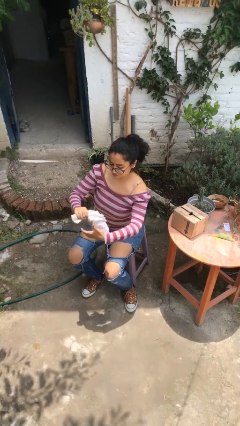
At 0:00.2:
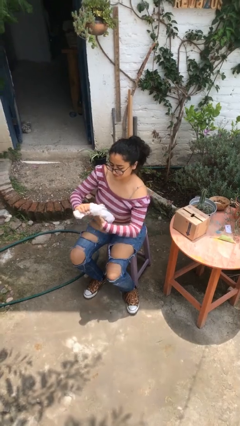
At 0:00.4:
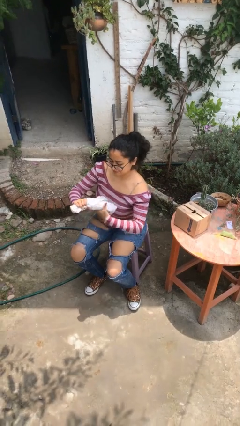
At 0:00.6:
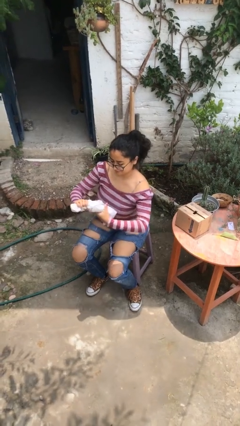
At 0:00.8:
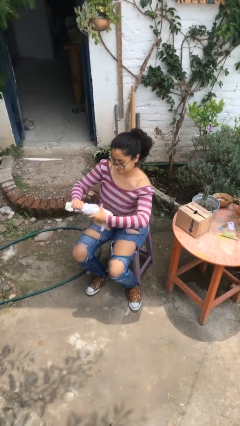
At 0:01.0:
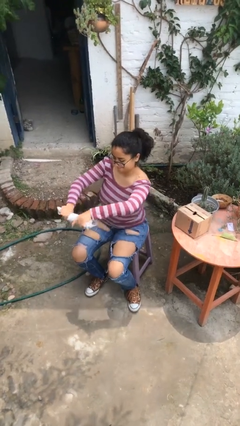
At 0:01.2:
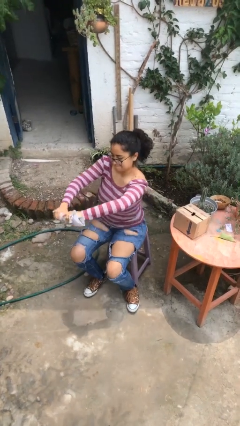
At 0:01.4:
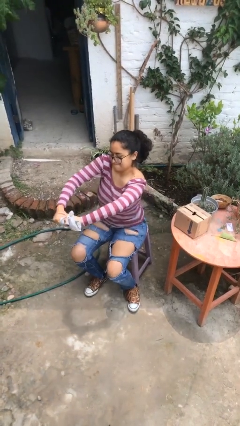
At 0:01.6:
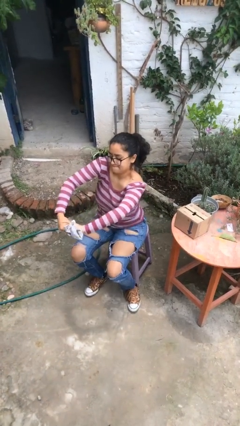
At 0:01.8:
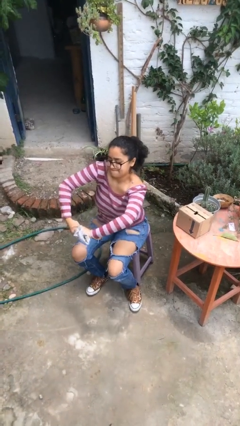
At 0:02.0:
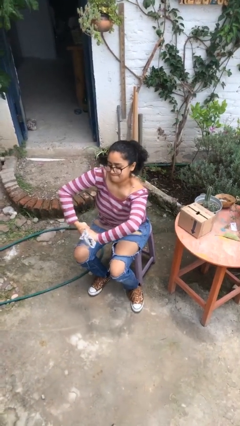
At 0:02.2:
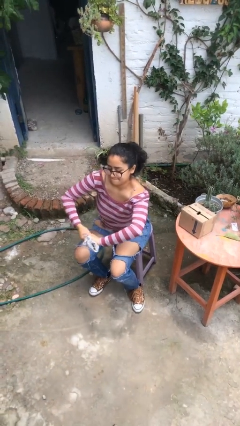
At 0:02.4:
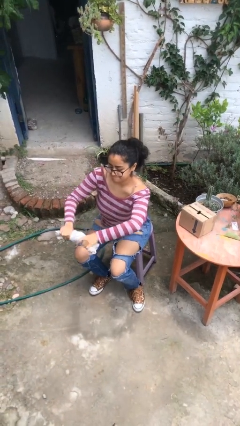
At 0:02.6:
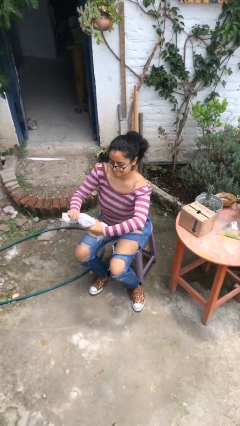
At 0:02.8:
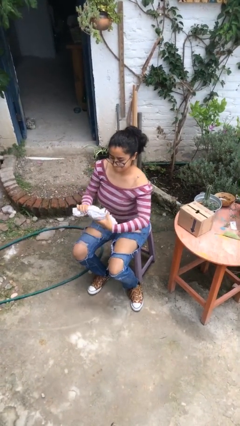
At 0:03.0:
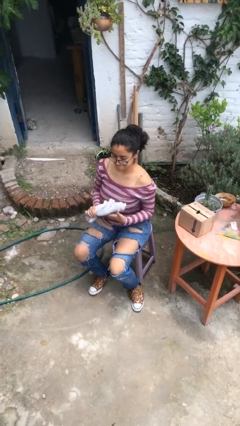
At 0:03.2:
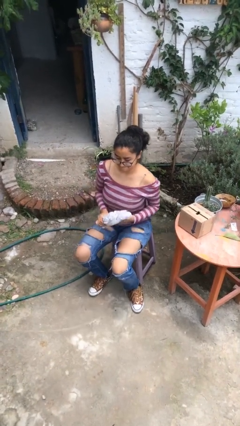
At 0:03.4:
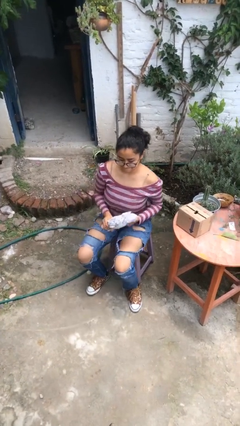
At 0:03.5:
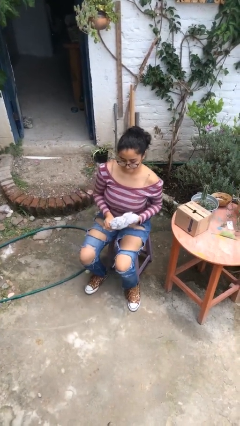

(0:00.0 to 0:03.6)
person squeezes object

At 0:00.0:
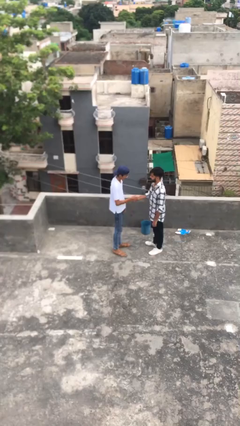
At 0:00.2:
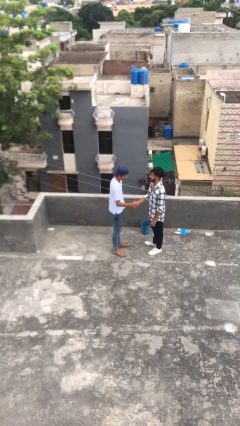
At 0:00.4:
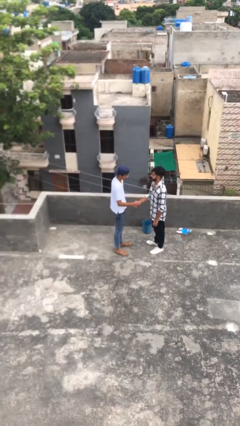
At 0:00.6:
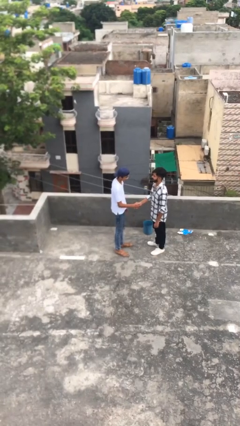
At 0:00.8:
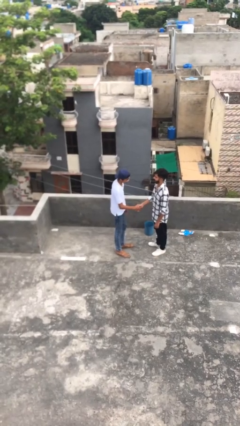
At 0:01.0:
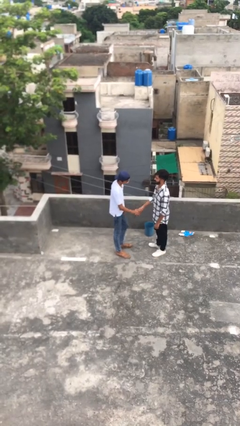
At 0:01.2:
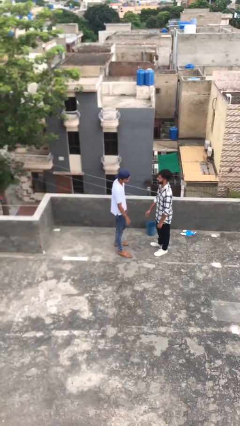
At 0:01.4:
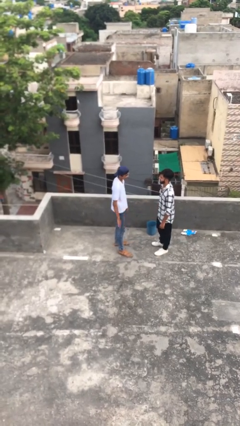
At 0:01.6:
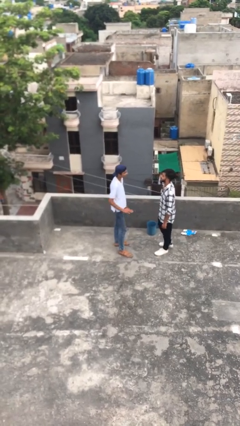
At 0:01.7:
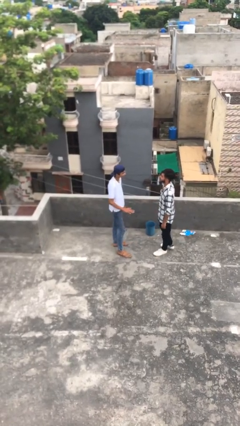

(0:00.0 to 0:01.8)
person shakes hand

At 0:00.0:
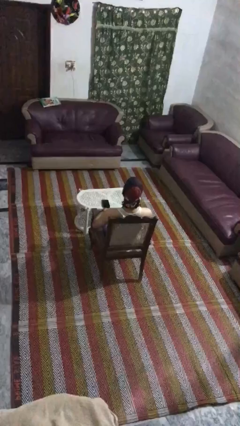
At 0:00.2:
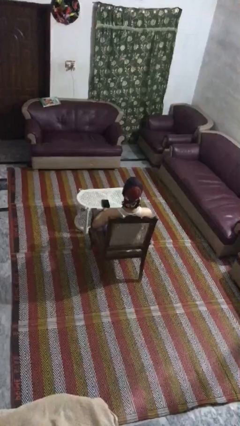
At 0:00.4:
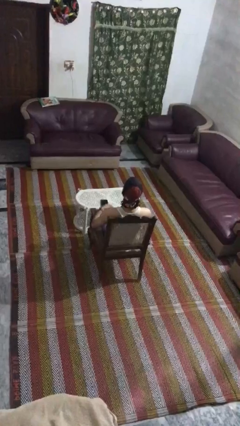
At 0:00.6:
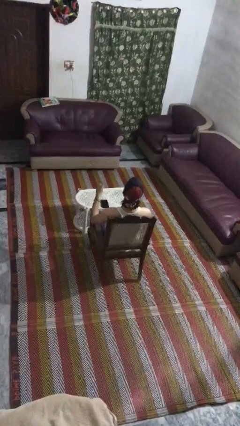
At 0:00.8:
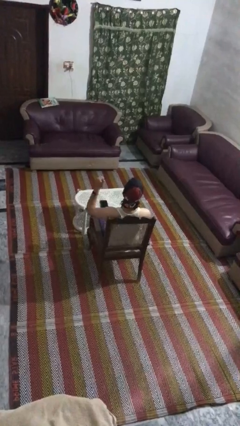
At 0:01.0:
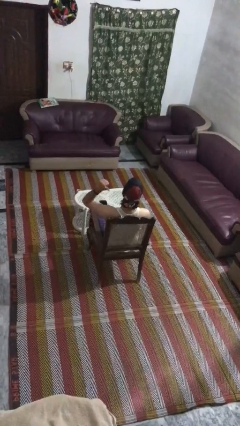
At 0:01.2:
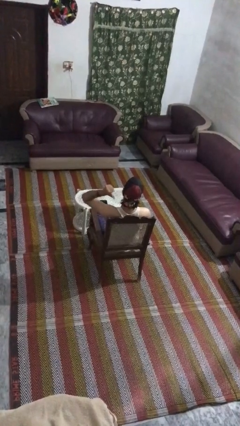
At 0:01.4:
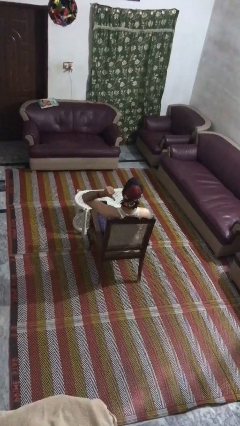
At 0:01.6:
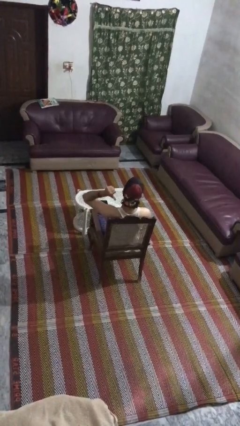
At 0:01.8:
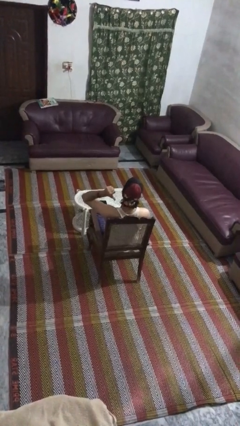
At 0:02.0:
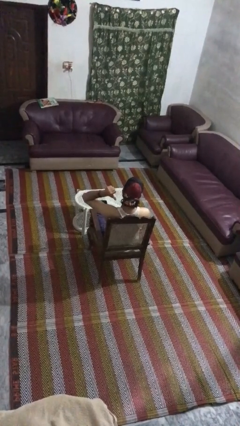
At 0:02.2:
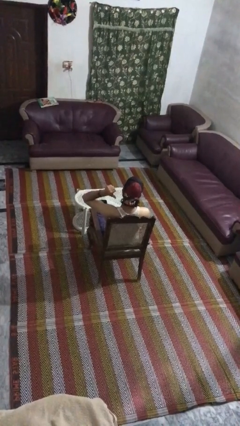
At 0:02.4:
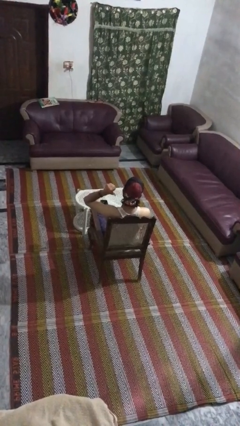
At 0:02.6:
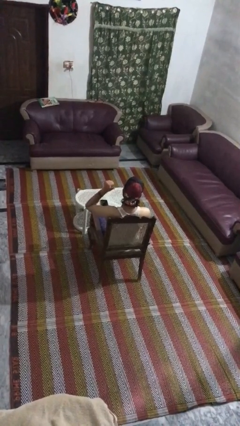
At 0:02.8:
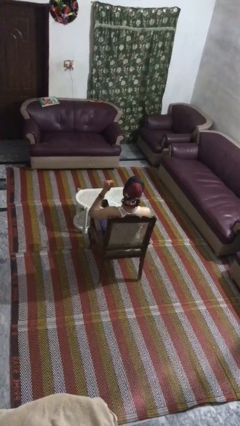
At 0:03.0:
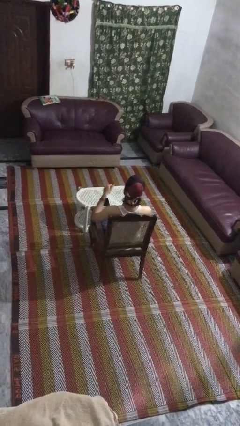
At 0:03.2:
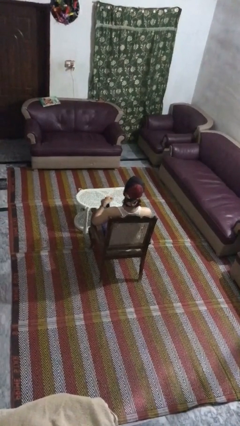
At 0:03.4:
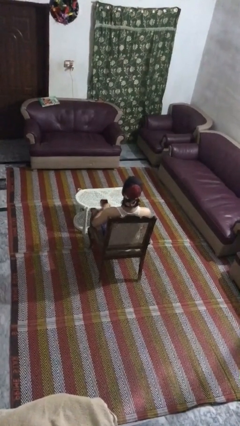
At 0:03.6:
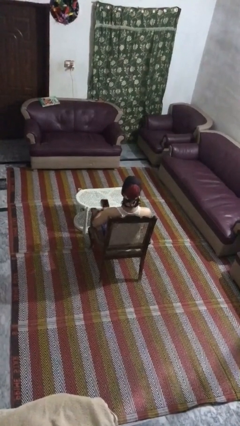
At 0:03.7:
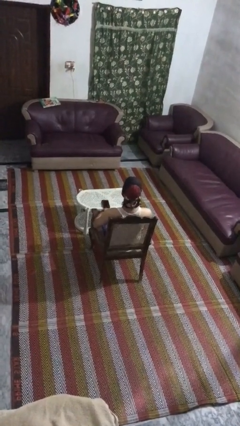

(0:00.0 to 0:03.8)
person gestures behind me

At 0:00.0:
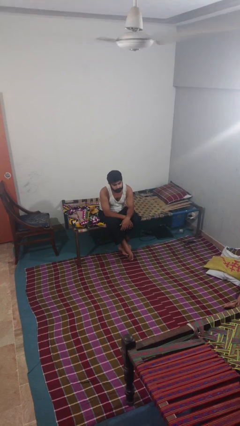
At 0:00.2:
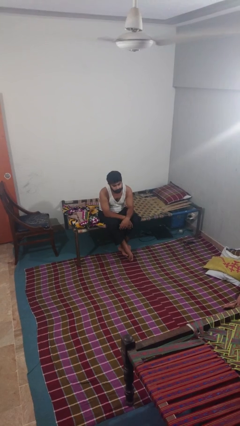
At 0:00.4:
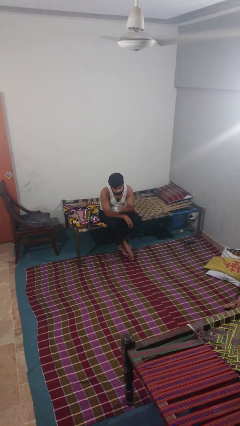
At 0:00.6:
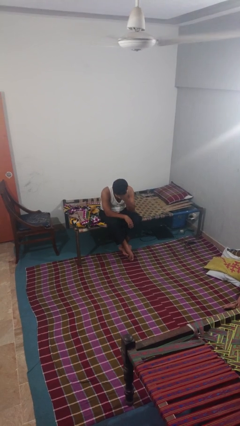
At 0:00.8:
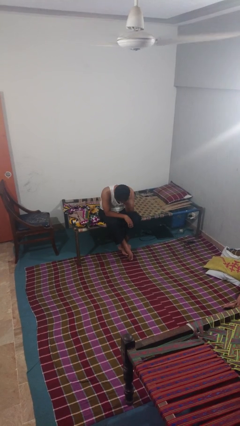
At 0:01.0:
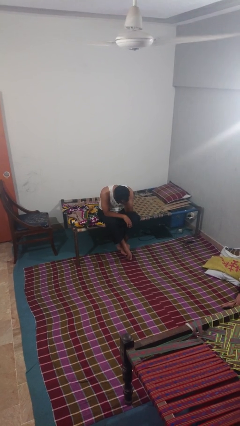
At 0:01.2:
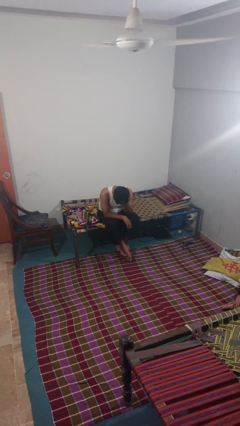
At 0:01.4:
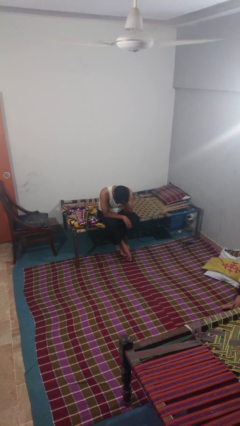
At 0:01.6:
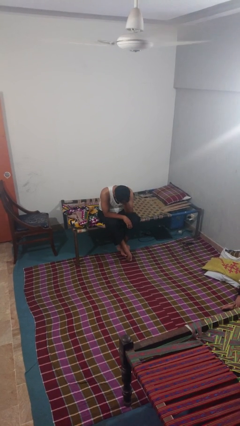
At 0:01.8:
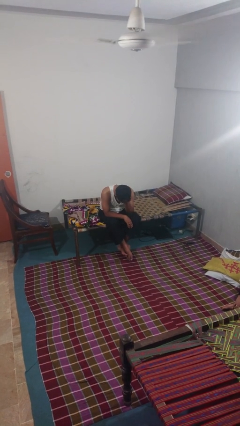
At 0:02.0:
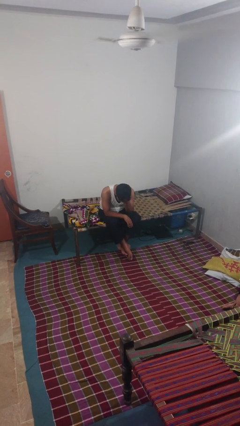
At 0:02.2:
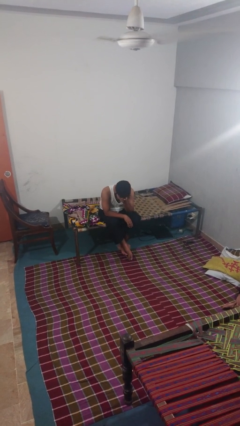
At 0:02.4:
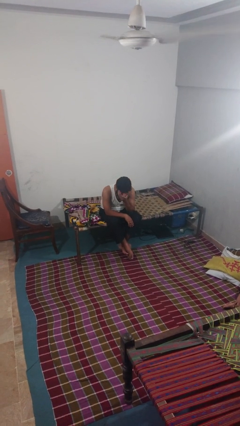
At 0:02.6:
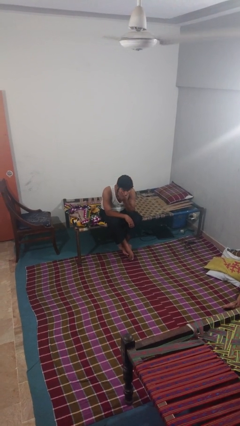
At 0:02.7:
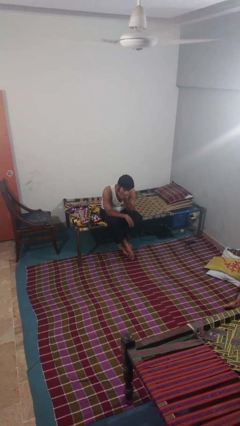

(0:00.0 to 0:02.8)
person covers face with hands

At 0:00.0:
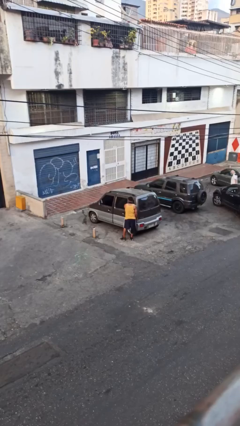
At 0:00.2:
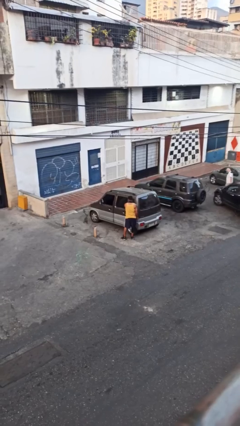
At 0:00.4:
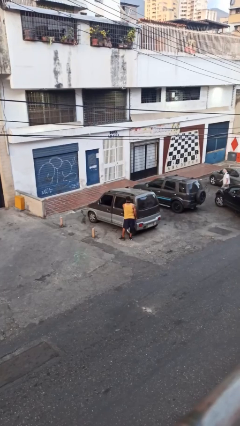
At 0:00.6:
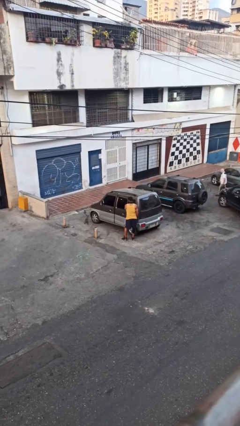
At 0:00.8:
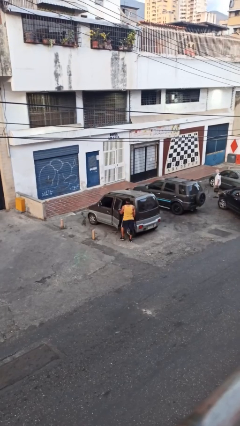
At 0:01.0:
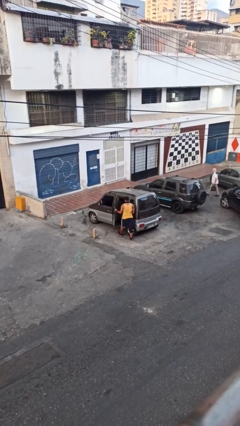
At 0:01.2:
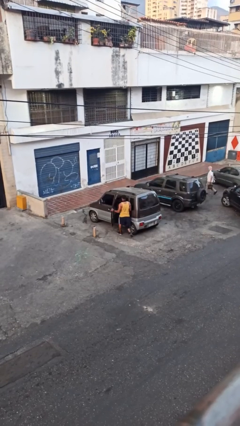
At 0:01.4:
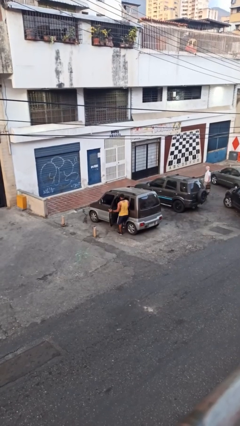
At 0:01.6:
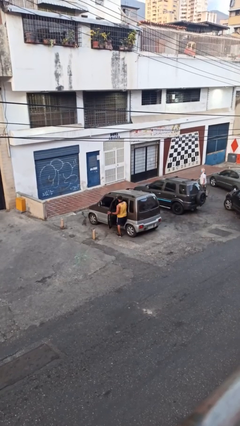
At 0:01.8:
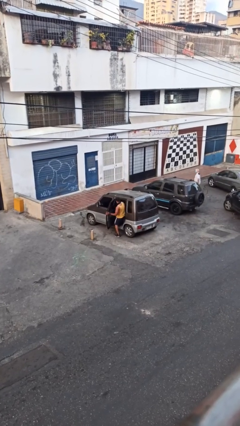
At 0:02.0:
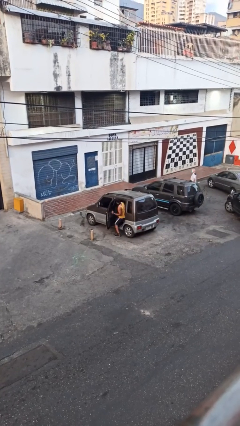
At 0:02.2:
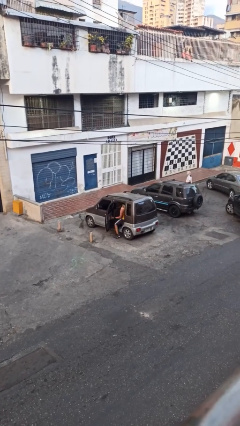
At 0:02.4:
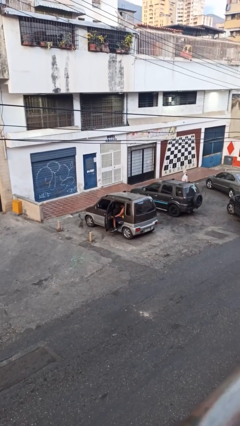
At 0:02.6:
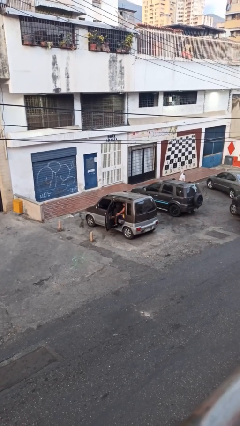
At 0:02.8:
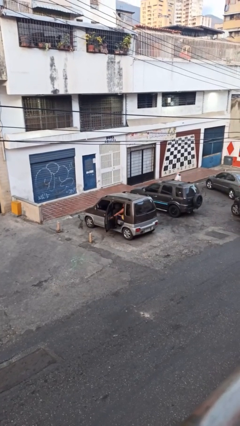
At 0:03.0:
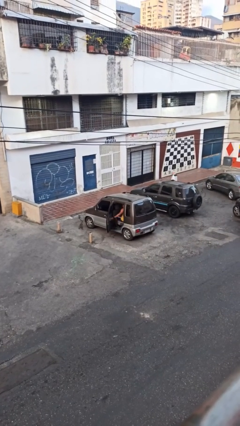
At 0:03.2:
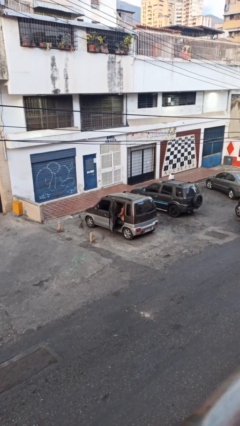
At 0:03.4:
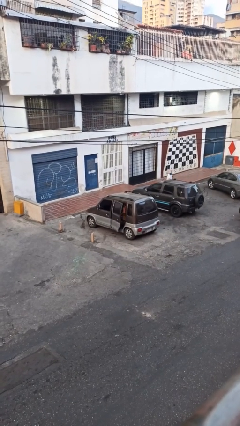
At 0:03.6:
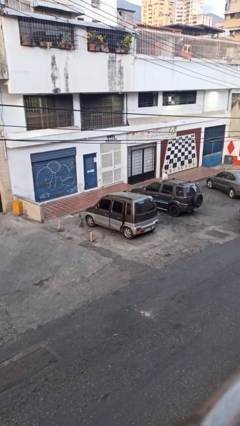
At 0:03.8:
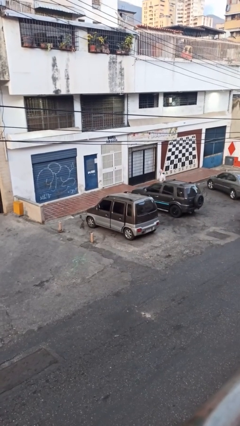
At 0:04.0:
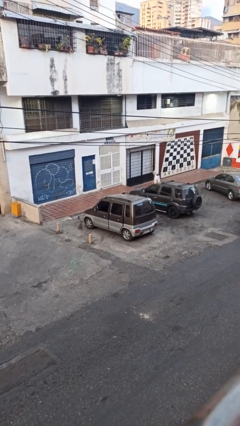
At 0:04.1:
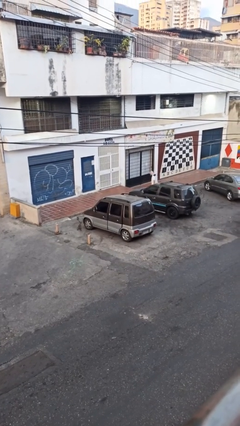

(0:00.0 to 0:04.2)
car picks up person

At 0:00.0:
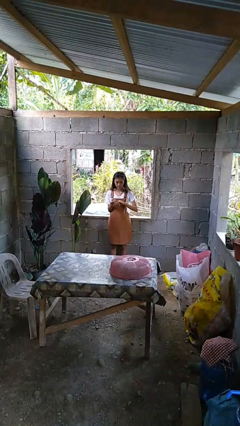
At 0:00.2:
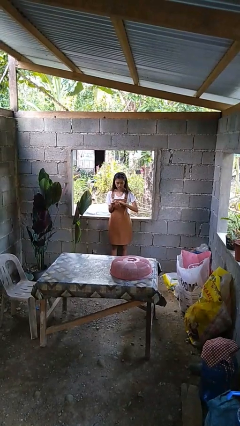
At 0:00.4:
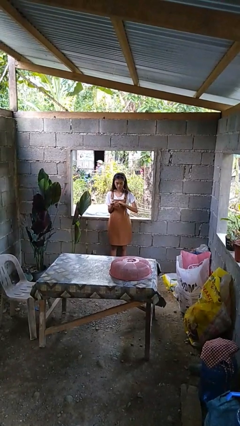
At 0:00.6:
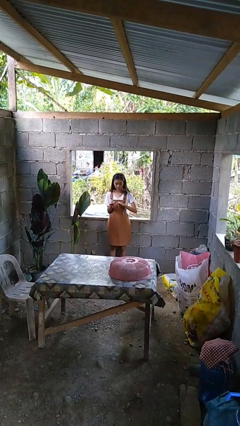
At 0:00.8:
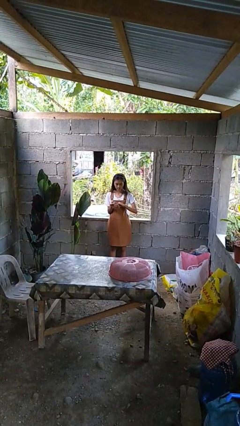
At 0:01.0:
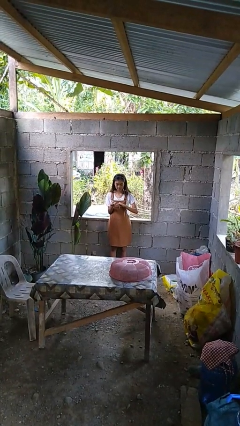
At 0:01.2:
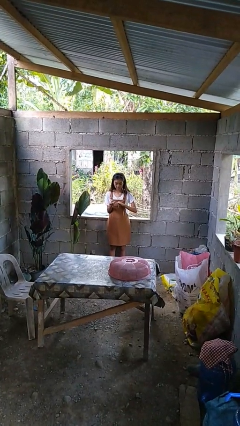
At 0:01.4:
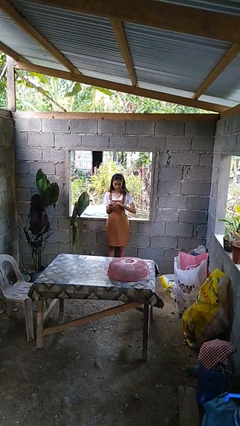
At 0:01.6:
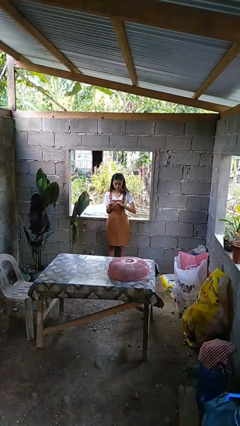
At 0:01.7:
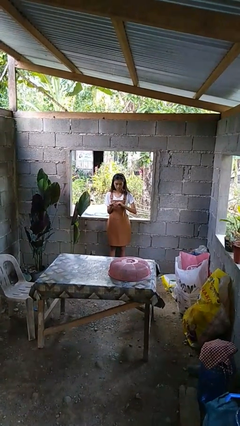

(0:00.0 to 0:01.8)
person clips fingernails
